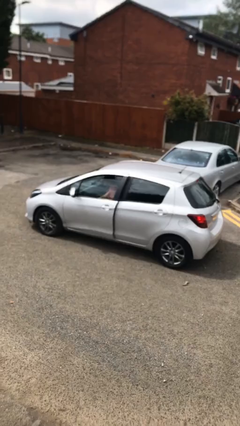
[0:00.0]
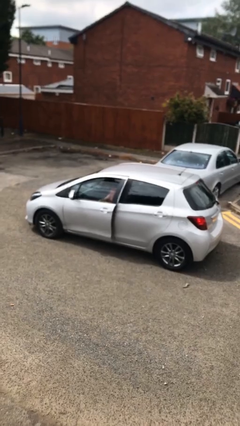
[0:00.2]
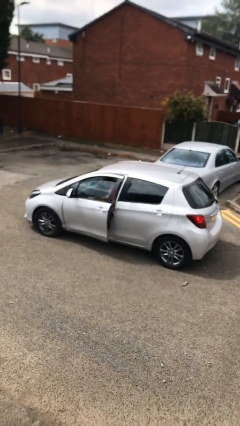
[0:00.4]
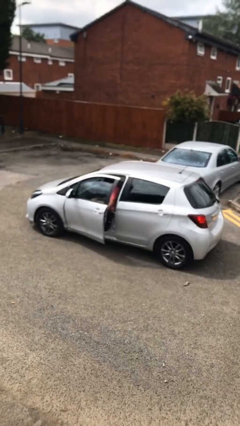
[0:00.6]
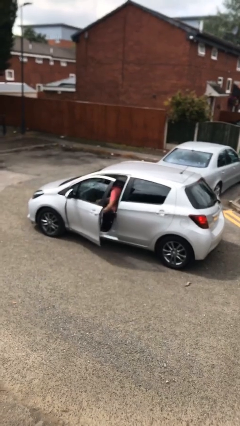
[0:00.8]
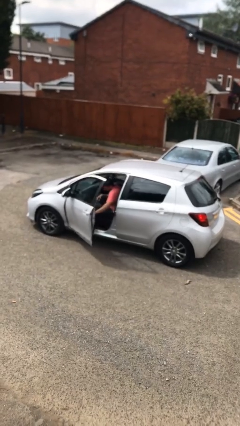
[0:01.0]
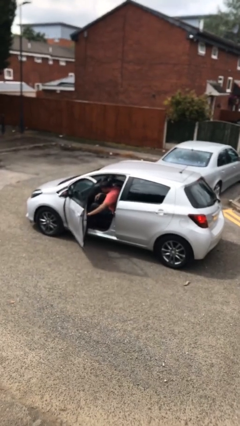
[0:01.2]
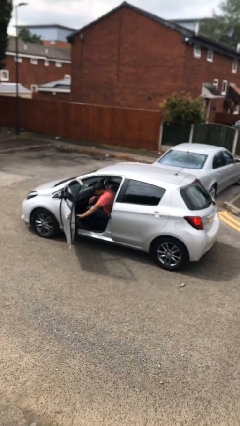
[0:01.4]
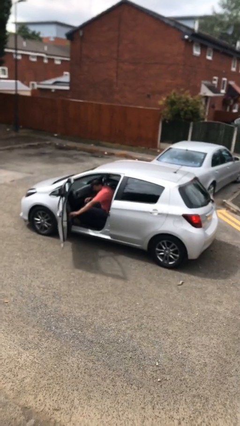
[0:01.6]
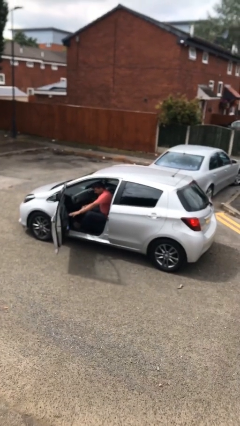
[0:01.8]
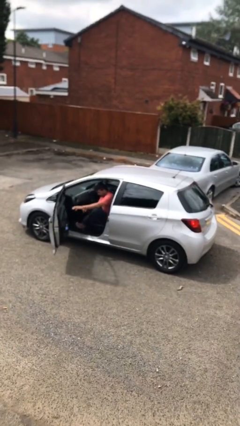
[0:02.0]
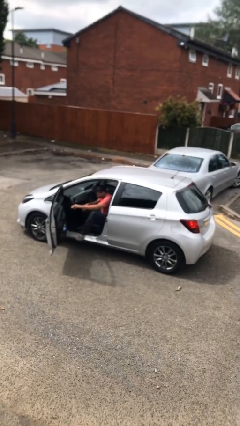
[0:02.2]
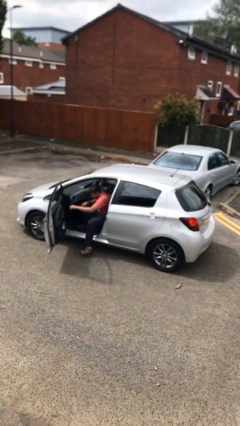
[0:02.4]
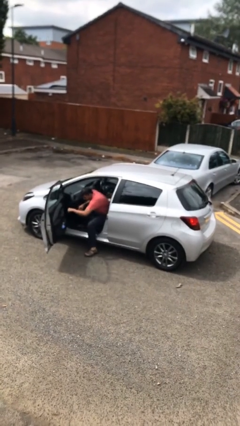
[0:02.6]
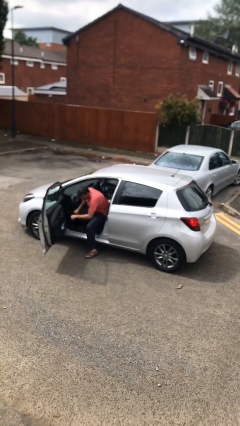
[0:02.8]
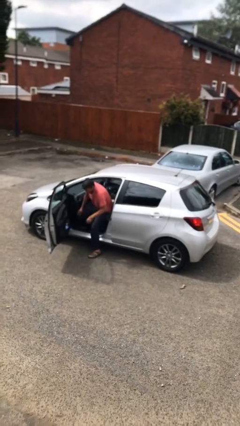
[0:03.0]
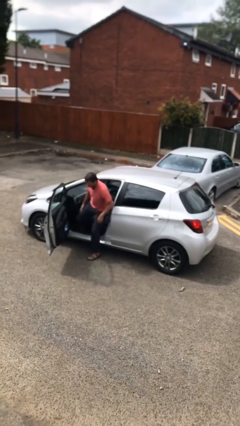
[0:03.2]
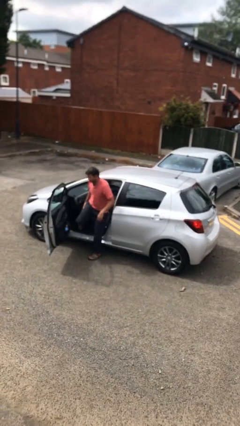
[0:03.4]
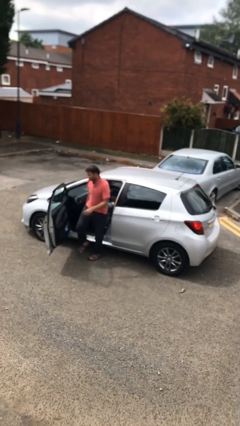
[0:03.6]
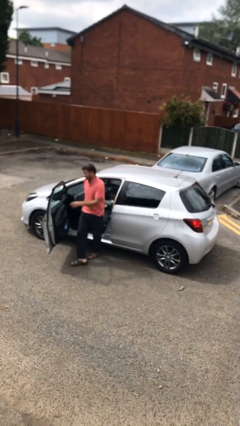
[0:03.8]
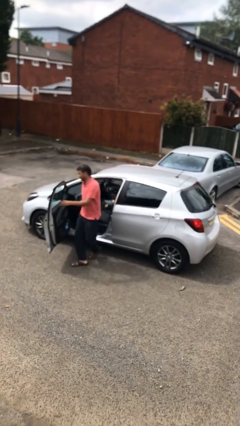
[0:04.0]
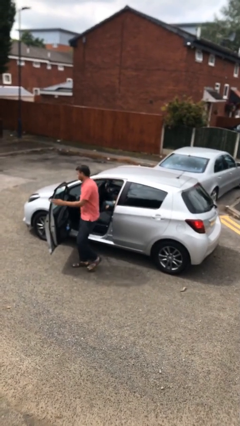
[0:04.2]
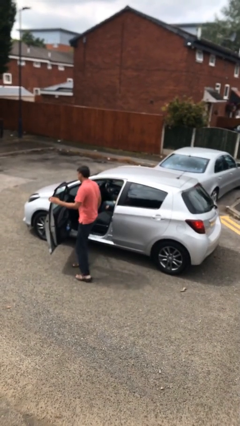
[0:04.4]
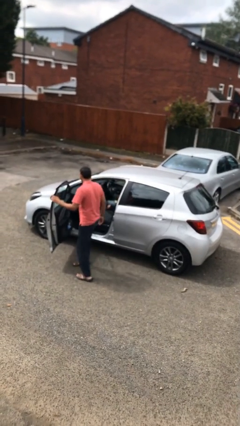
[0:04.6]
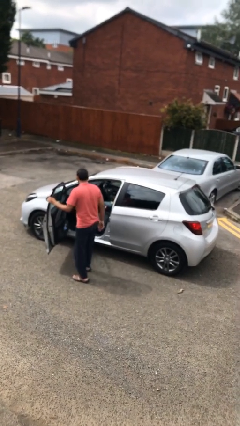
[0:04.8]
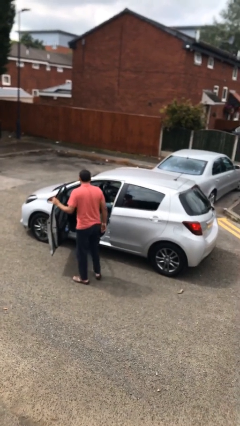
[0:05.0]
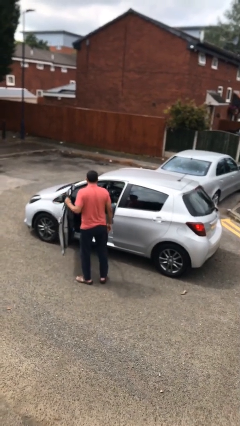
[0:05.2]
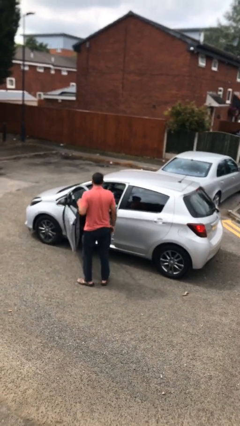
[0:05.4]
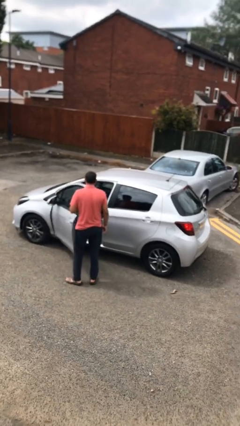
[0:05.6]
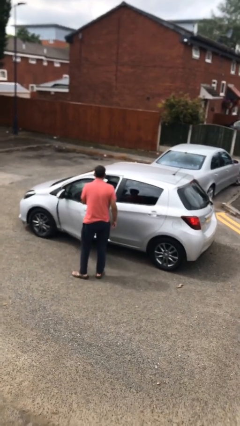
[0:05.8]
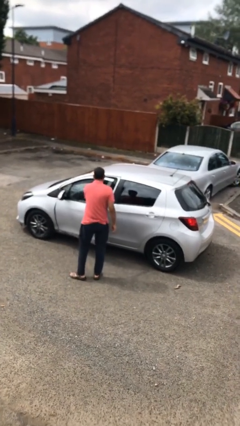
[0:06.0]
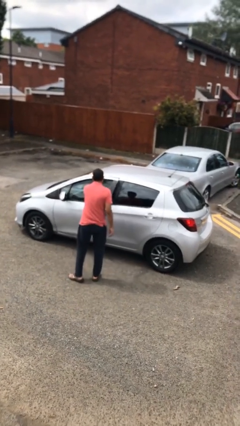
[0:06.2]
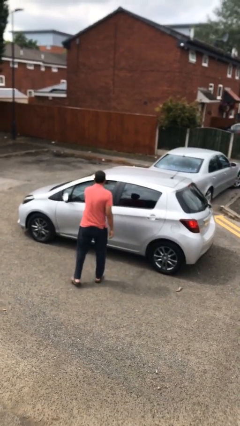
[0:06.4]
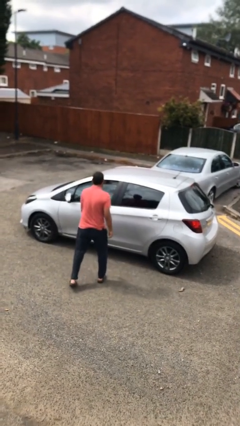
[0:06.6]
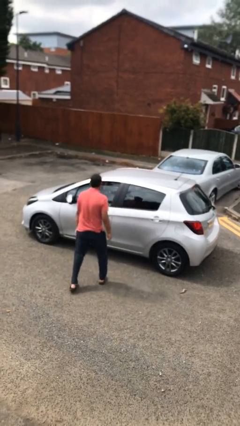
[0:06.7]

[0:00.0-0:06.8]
car drops off person

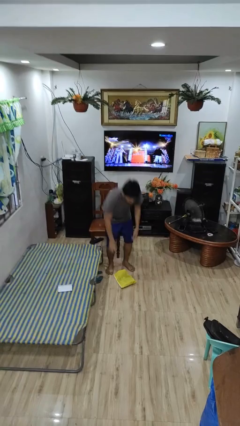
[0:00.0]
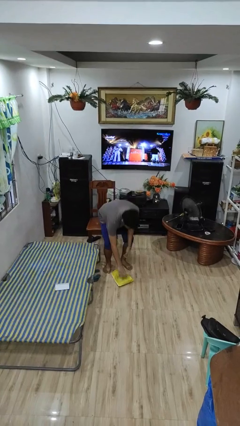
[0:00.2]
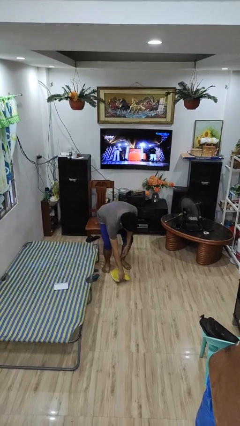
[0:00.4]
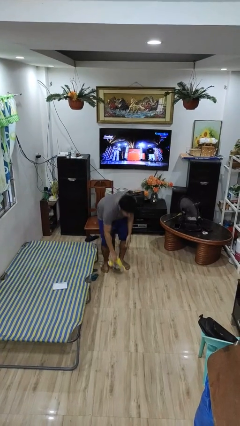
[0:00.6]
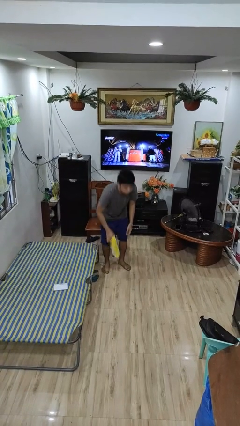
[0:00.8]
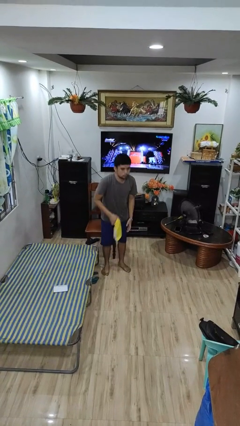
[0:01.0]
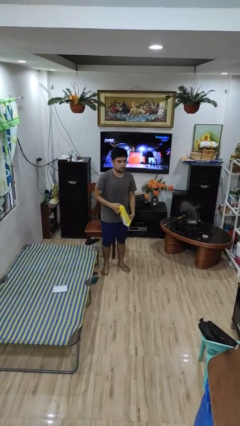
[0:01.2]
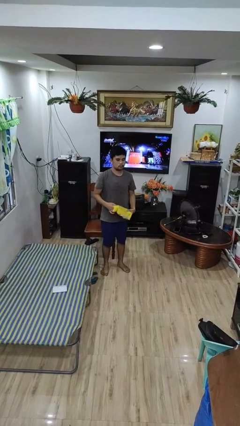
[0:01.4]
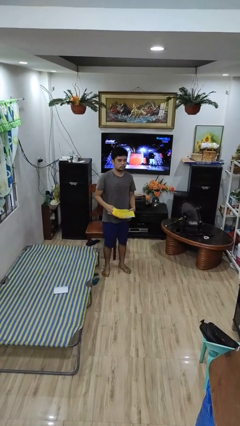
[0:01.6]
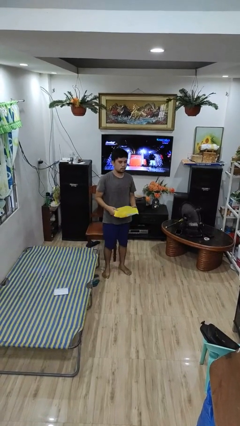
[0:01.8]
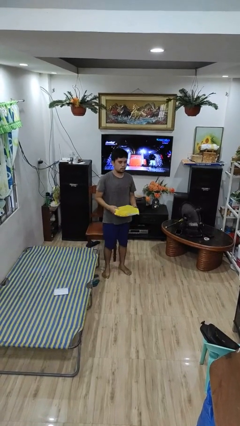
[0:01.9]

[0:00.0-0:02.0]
person picks up object from floor

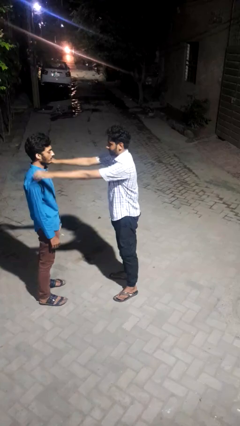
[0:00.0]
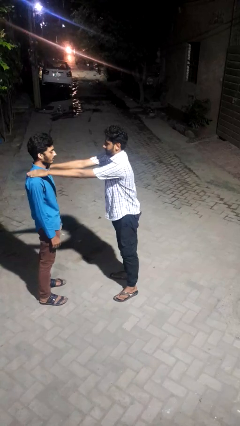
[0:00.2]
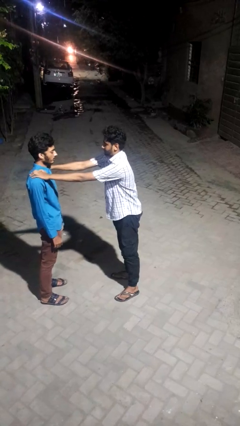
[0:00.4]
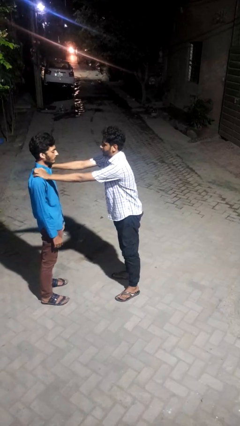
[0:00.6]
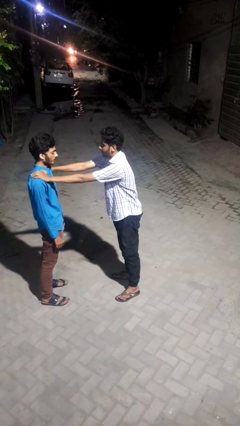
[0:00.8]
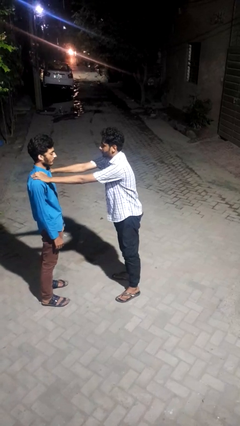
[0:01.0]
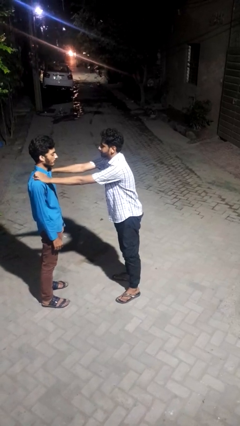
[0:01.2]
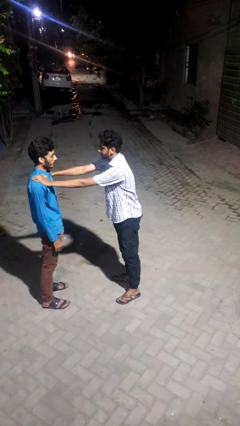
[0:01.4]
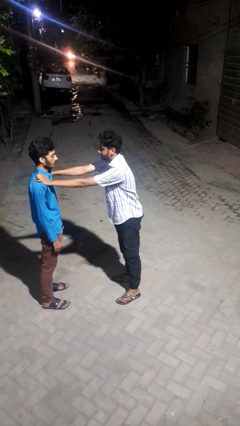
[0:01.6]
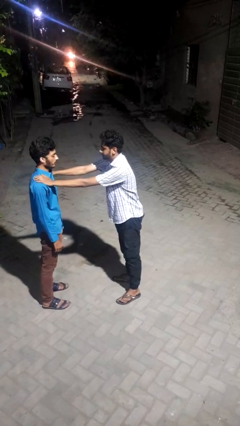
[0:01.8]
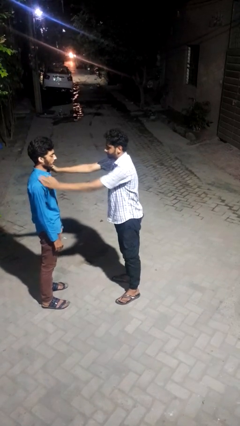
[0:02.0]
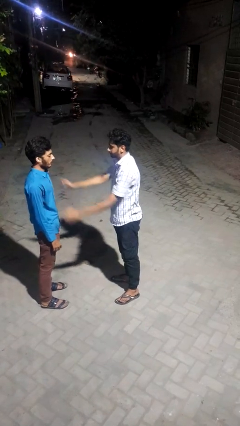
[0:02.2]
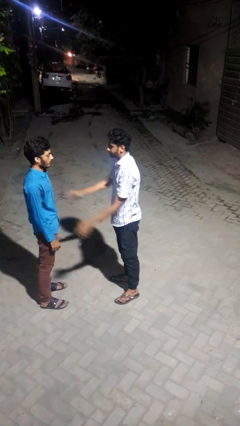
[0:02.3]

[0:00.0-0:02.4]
person pounds shoulders of person

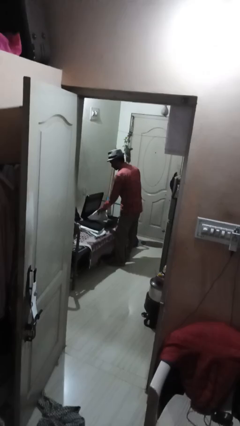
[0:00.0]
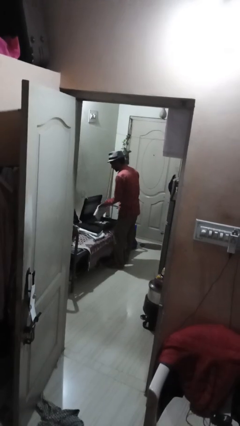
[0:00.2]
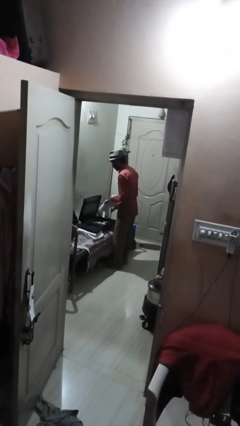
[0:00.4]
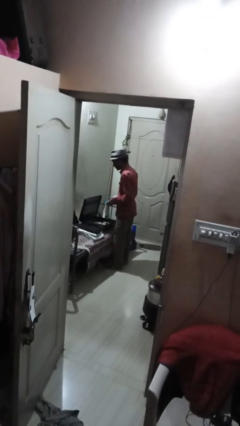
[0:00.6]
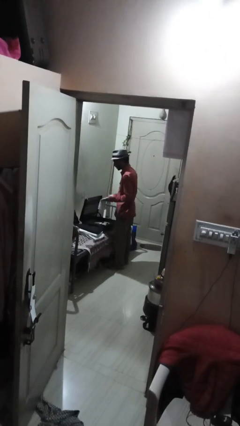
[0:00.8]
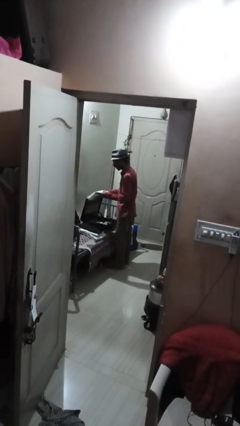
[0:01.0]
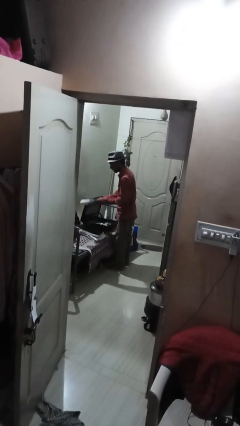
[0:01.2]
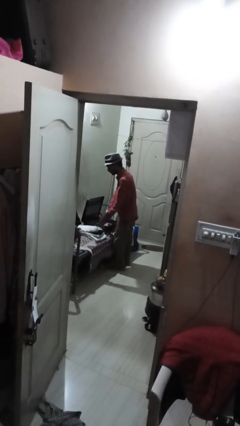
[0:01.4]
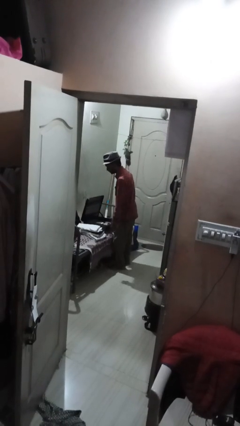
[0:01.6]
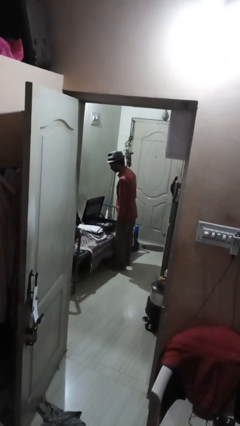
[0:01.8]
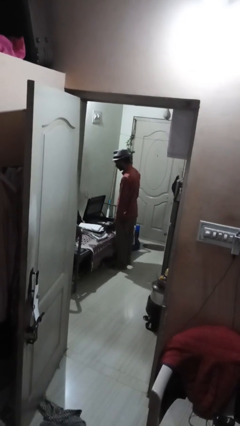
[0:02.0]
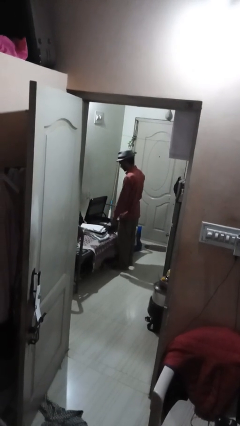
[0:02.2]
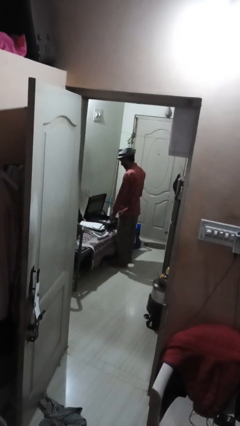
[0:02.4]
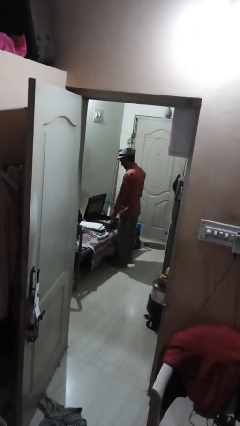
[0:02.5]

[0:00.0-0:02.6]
person unloads clothes from suitcase

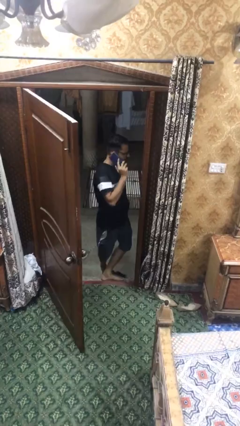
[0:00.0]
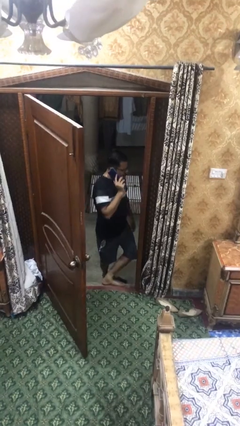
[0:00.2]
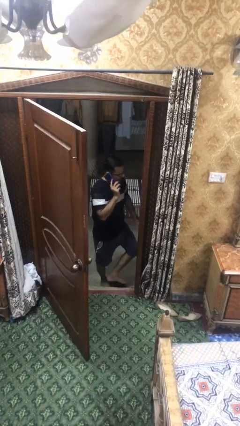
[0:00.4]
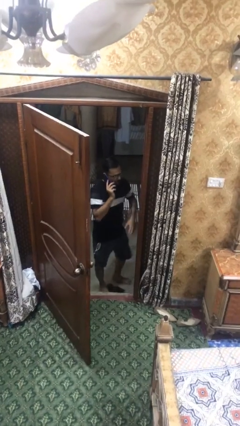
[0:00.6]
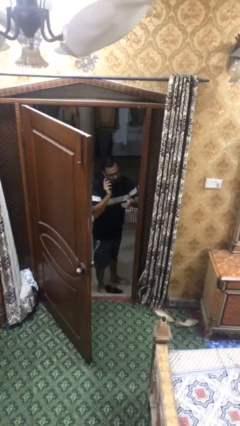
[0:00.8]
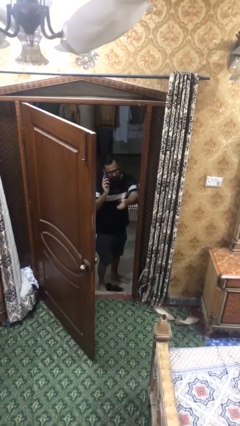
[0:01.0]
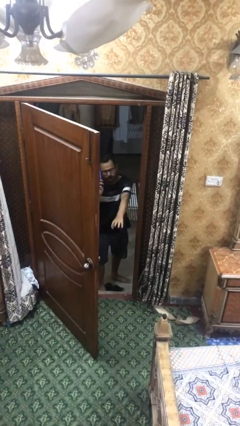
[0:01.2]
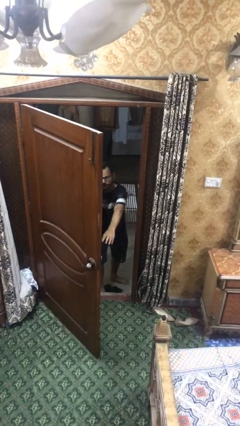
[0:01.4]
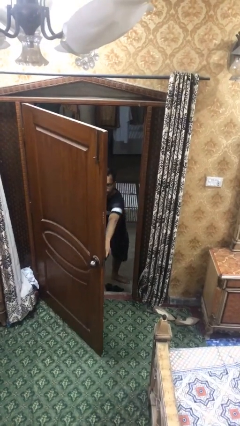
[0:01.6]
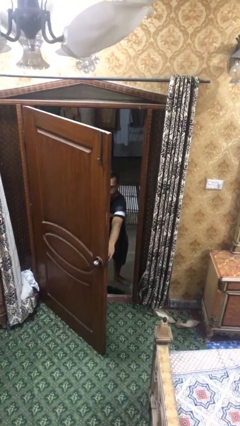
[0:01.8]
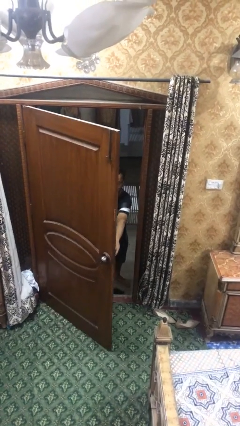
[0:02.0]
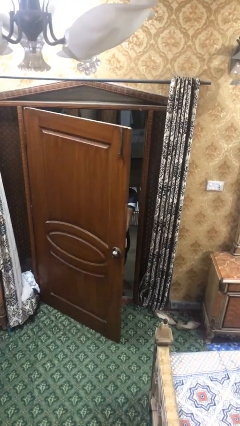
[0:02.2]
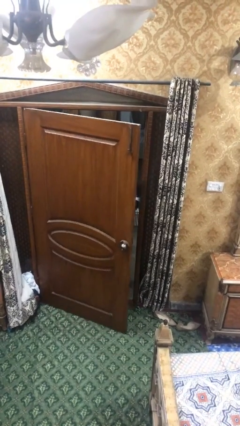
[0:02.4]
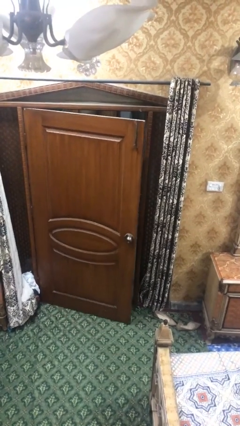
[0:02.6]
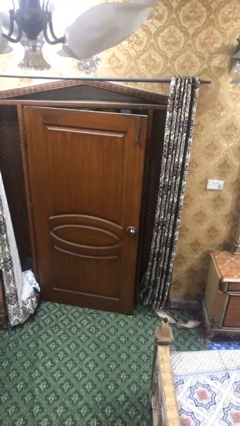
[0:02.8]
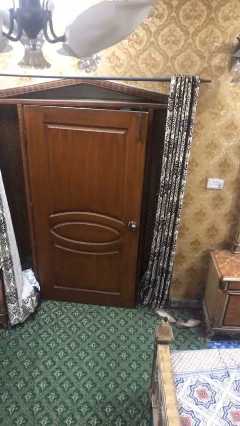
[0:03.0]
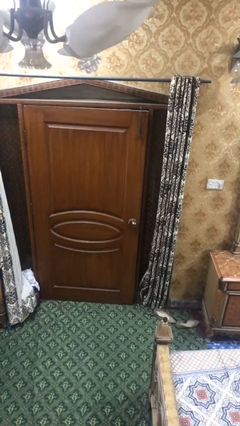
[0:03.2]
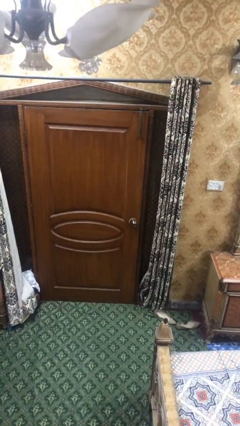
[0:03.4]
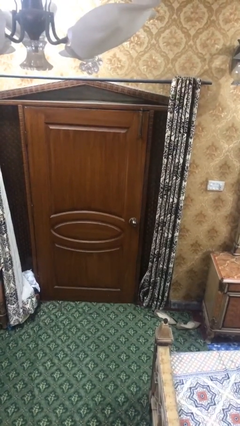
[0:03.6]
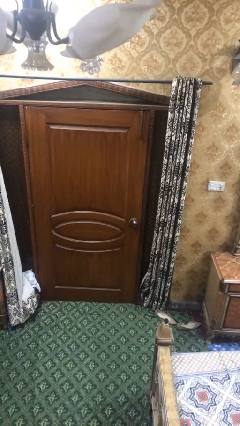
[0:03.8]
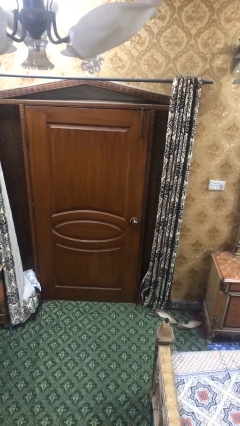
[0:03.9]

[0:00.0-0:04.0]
person closes facility door
